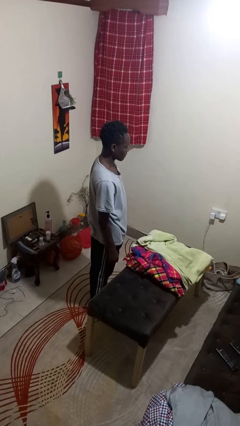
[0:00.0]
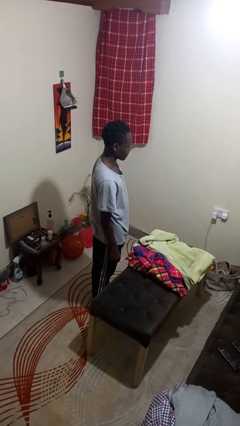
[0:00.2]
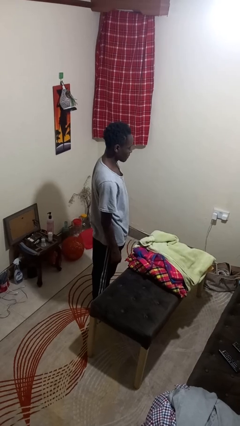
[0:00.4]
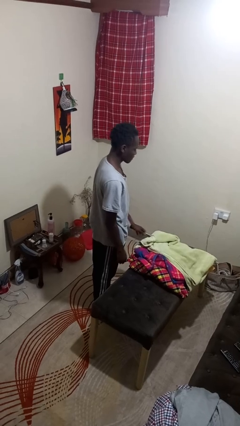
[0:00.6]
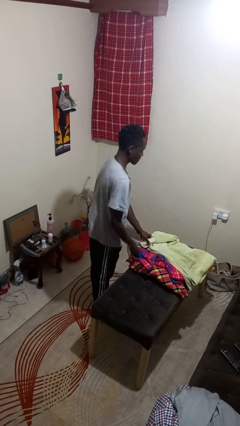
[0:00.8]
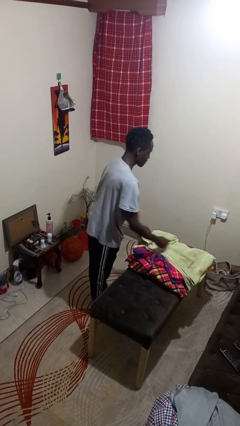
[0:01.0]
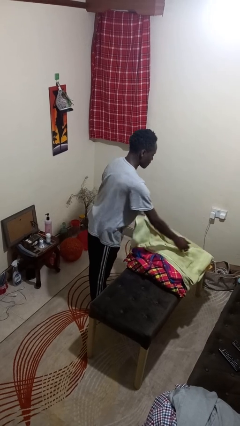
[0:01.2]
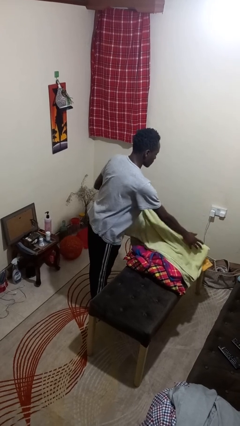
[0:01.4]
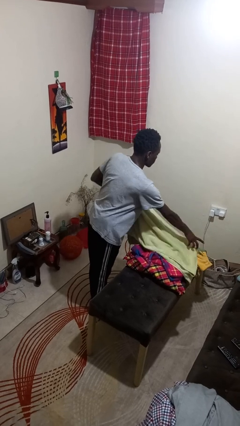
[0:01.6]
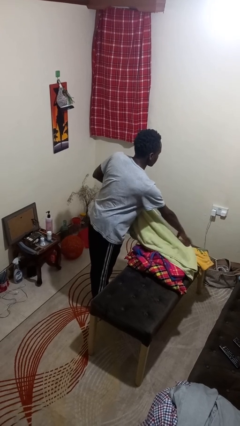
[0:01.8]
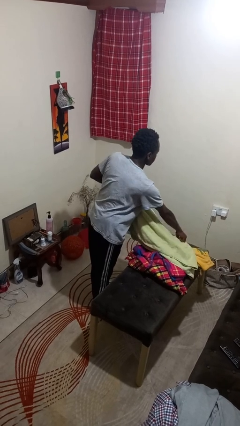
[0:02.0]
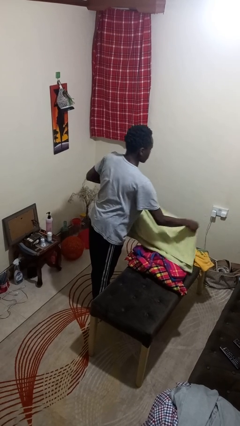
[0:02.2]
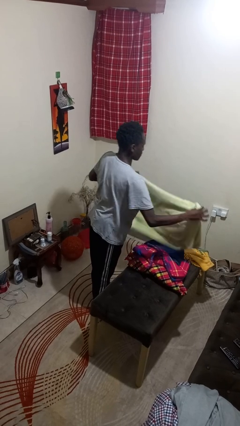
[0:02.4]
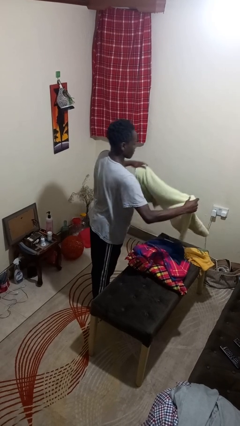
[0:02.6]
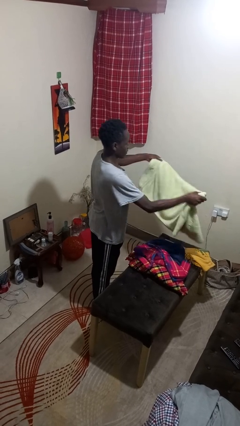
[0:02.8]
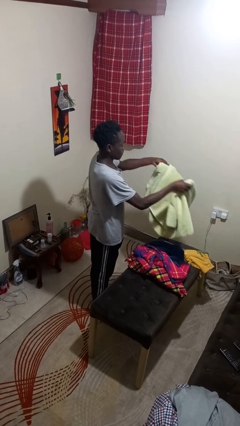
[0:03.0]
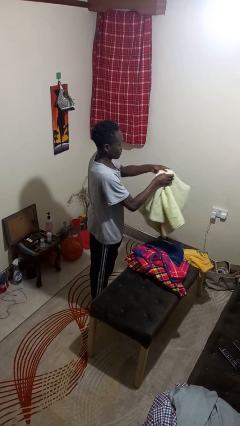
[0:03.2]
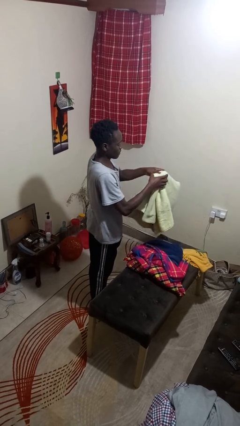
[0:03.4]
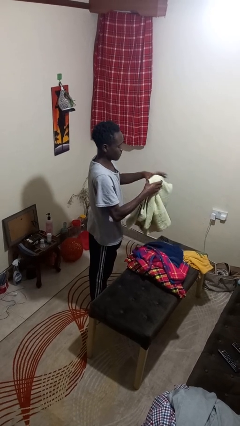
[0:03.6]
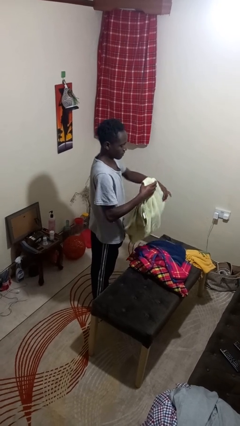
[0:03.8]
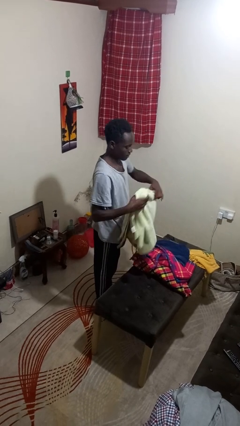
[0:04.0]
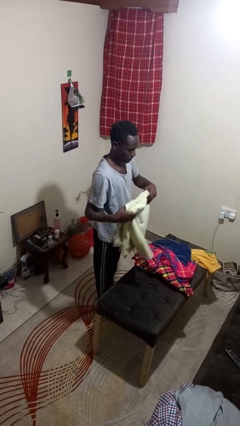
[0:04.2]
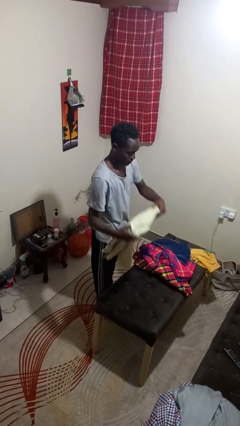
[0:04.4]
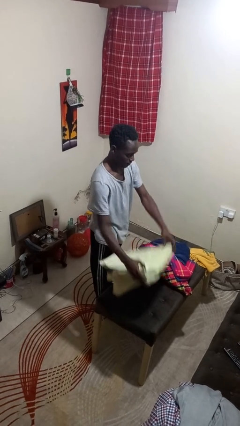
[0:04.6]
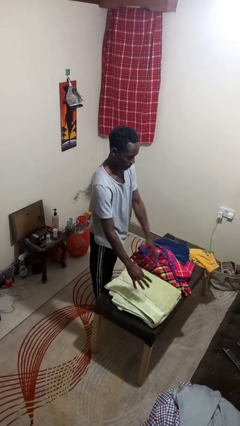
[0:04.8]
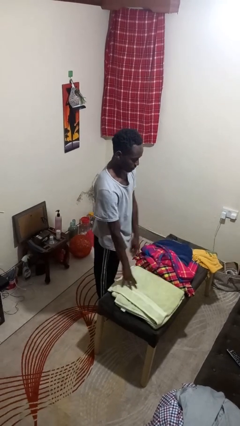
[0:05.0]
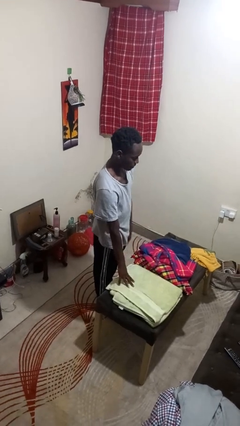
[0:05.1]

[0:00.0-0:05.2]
person folds towel

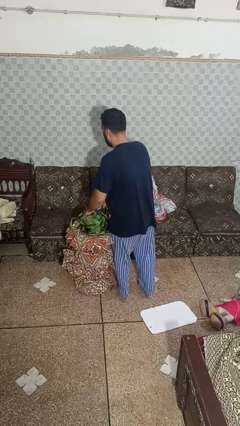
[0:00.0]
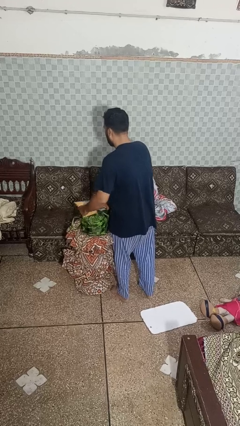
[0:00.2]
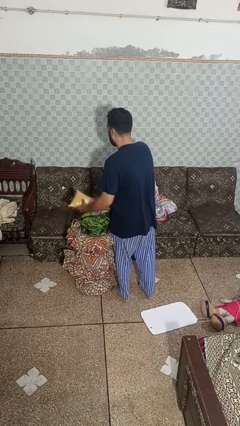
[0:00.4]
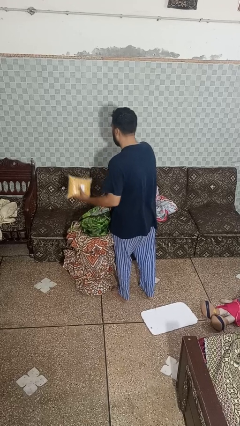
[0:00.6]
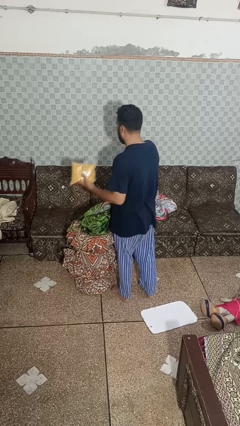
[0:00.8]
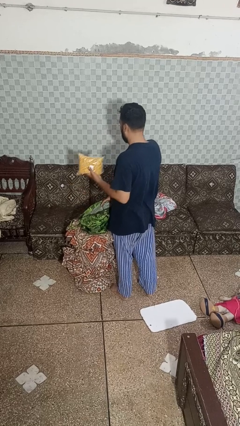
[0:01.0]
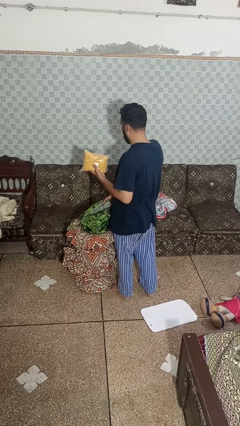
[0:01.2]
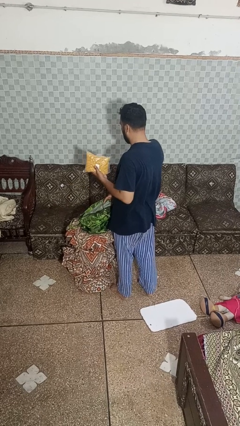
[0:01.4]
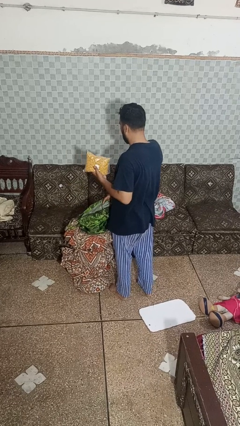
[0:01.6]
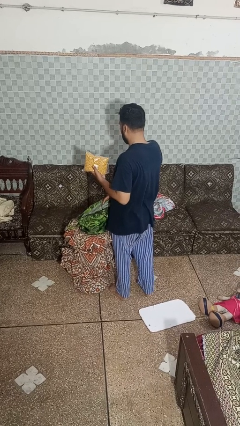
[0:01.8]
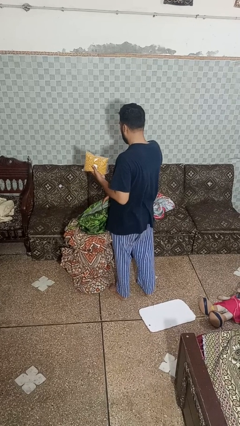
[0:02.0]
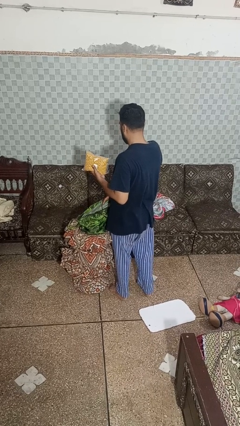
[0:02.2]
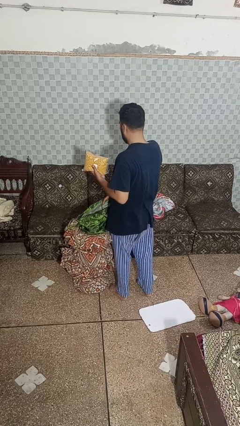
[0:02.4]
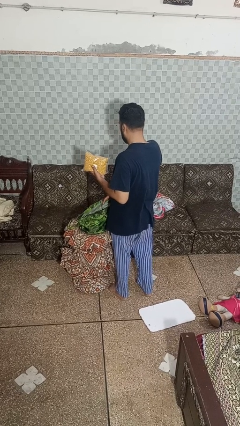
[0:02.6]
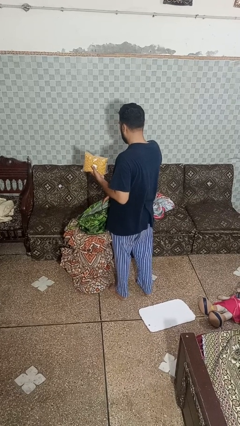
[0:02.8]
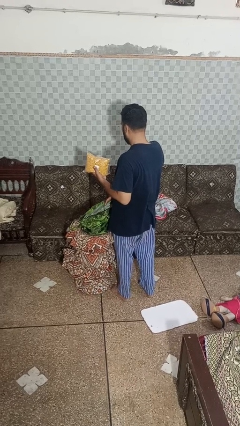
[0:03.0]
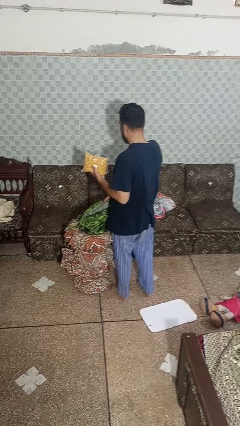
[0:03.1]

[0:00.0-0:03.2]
person takes object from bag

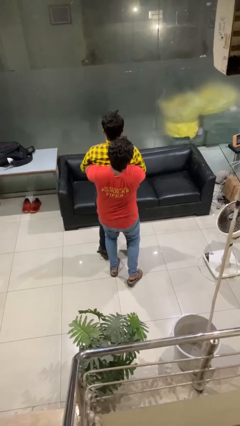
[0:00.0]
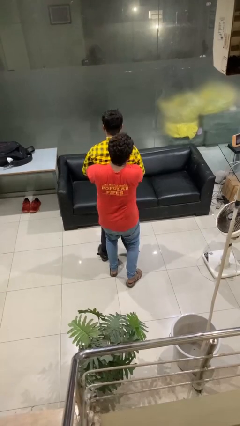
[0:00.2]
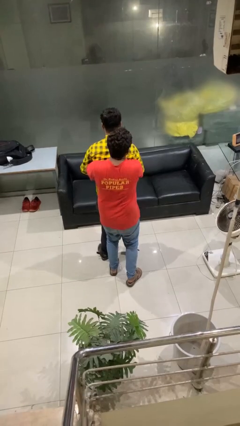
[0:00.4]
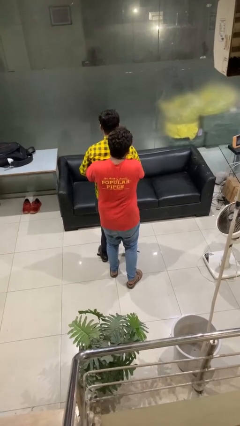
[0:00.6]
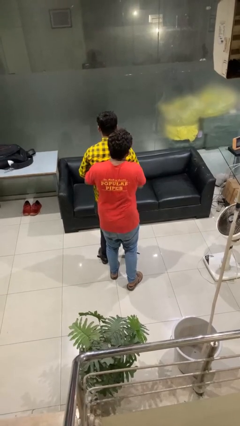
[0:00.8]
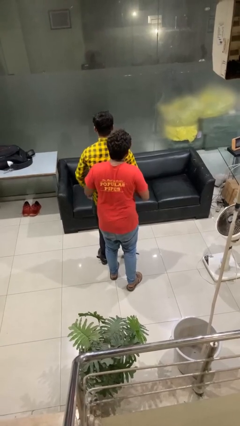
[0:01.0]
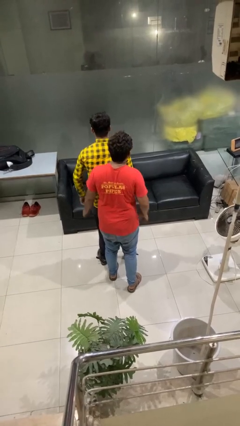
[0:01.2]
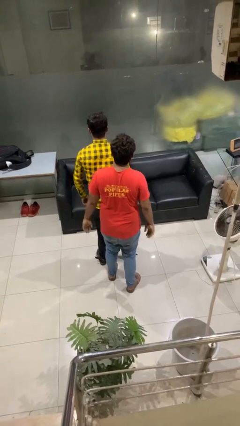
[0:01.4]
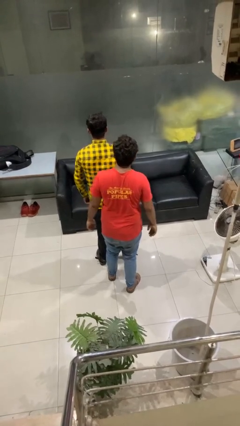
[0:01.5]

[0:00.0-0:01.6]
person puts down person

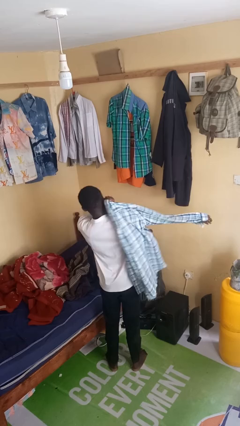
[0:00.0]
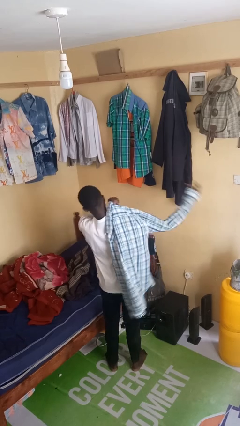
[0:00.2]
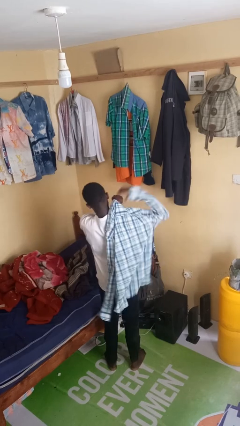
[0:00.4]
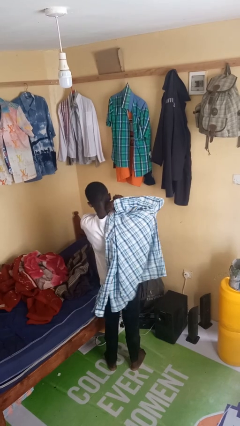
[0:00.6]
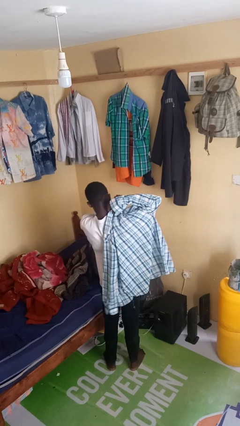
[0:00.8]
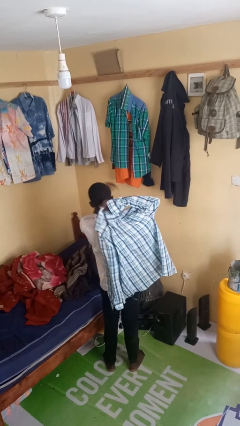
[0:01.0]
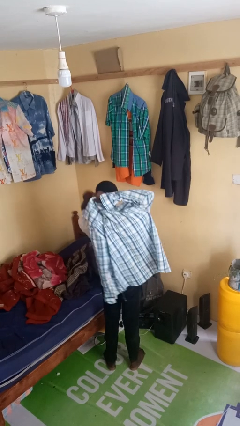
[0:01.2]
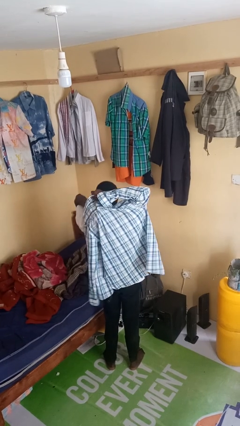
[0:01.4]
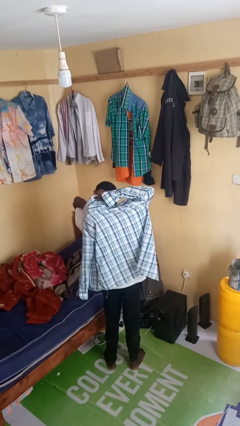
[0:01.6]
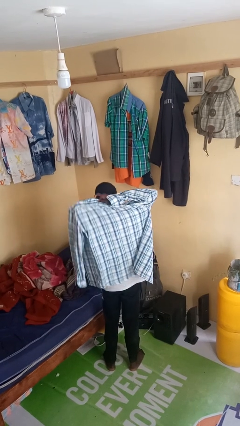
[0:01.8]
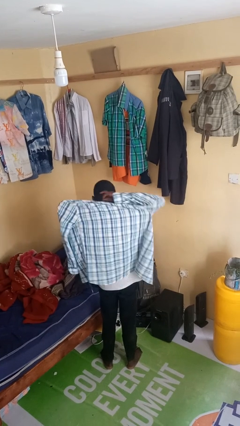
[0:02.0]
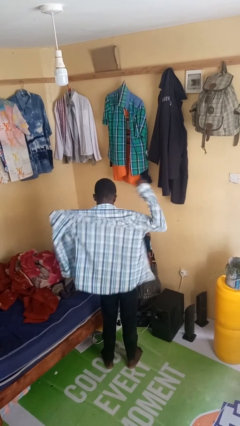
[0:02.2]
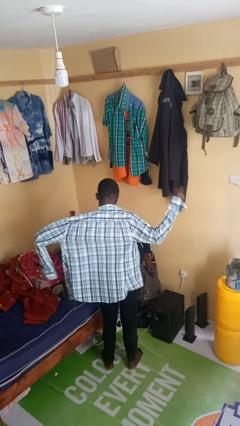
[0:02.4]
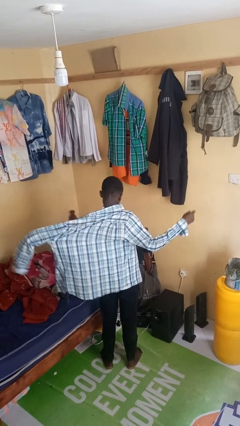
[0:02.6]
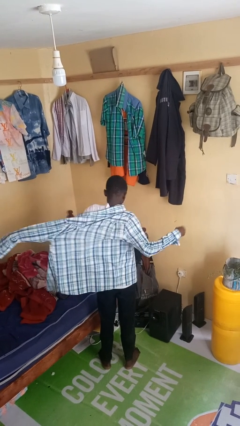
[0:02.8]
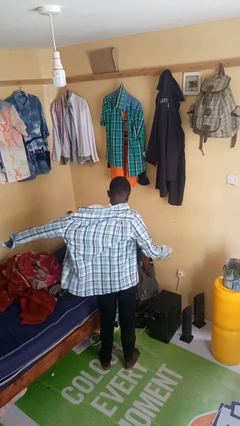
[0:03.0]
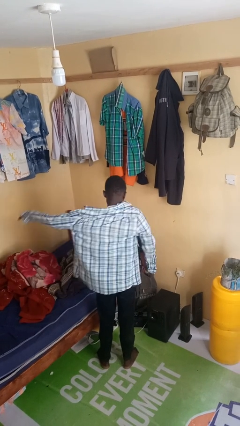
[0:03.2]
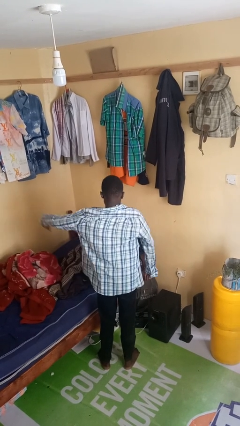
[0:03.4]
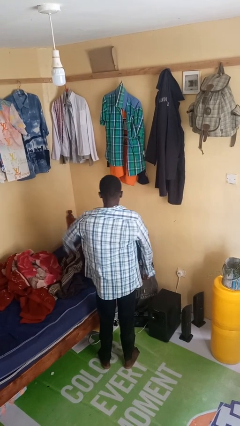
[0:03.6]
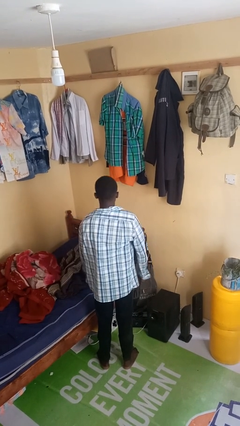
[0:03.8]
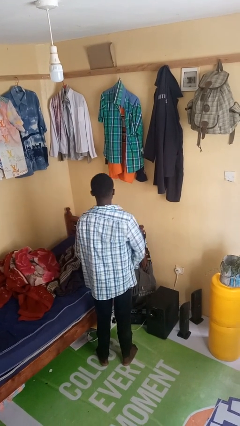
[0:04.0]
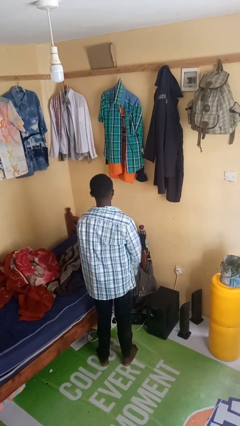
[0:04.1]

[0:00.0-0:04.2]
person puts on shirt

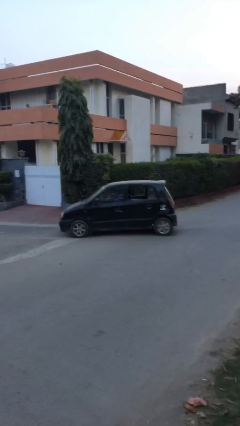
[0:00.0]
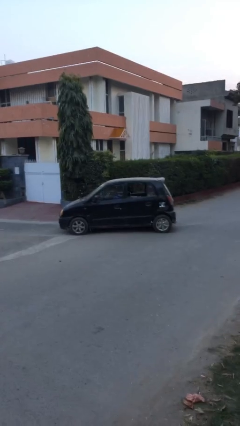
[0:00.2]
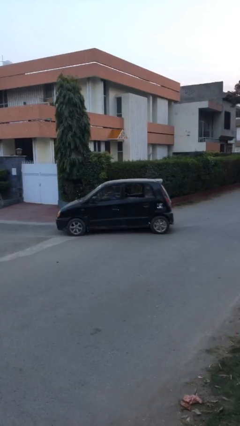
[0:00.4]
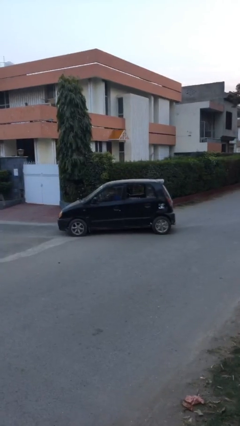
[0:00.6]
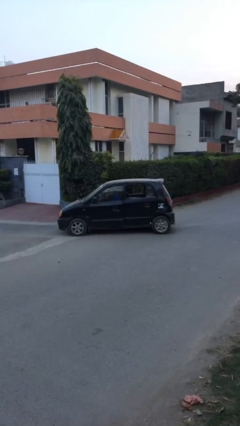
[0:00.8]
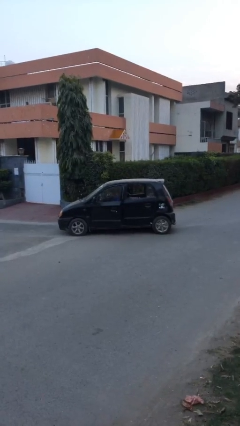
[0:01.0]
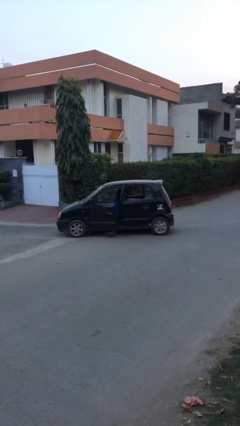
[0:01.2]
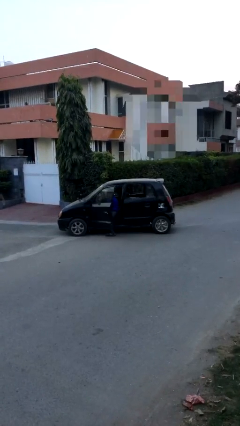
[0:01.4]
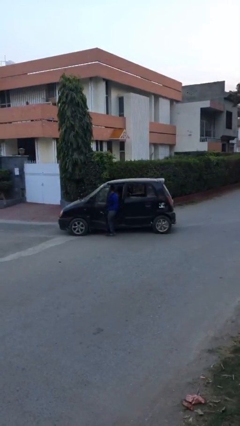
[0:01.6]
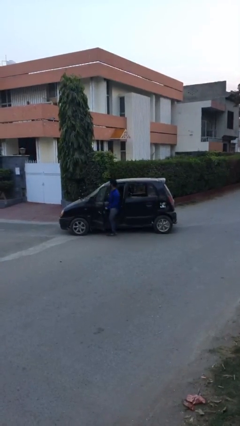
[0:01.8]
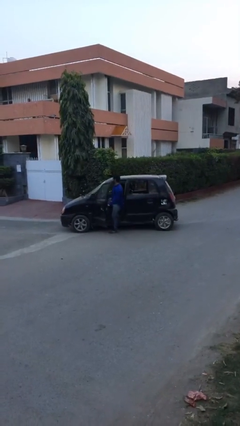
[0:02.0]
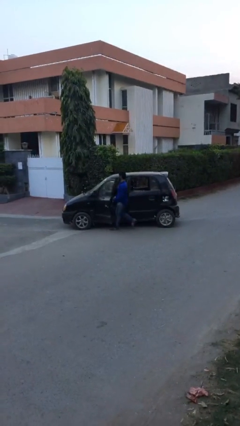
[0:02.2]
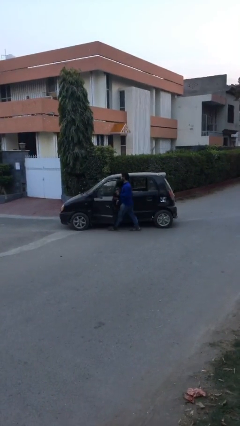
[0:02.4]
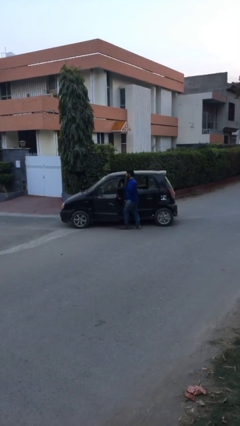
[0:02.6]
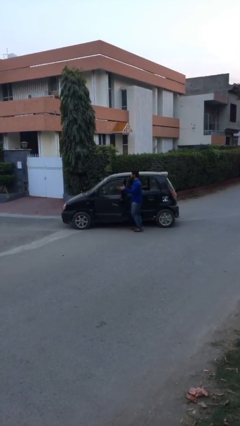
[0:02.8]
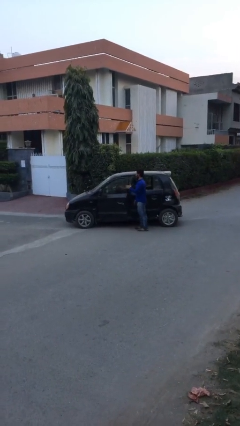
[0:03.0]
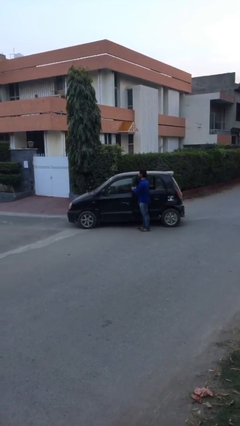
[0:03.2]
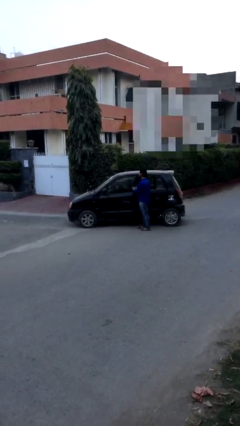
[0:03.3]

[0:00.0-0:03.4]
car drops off person
